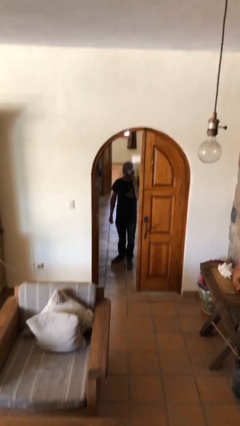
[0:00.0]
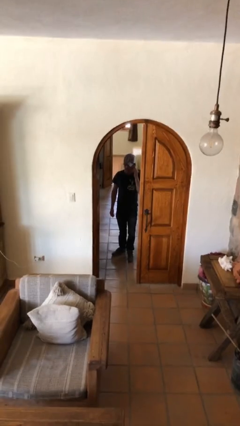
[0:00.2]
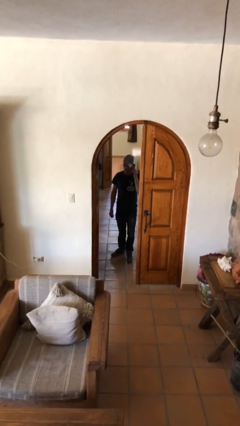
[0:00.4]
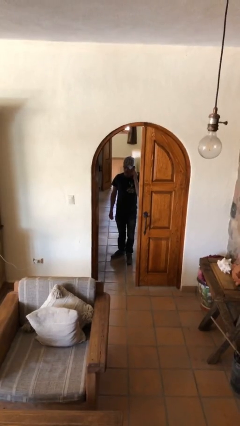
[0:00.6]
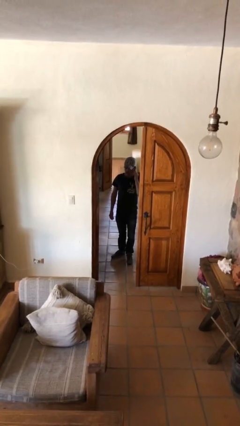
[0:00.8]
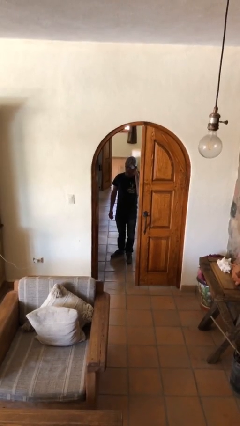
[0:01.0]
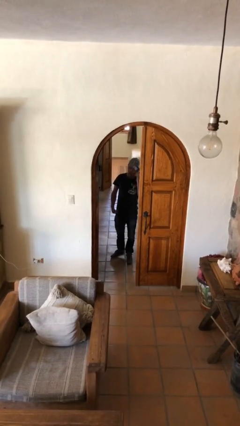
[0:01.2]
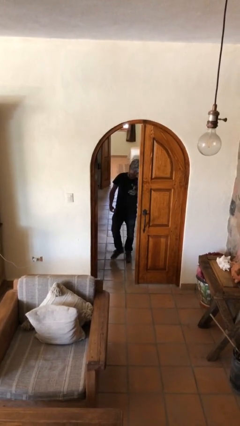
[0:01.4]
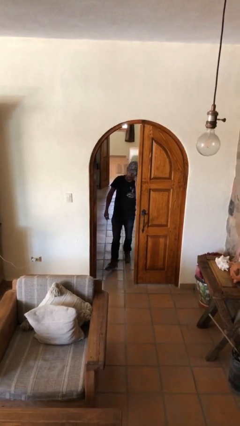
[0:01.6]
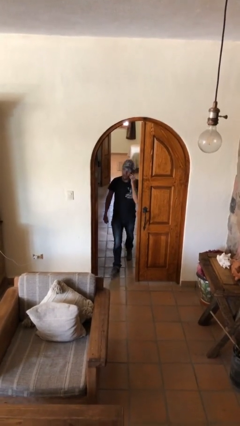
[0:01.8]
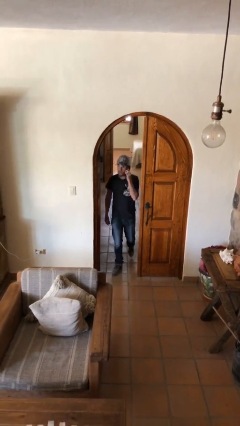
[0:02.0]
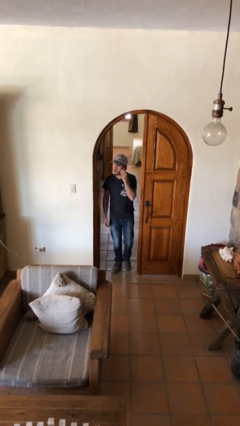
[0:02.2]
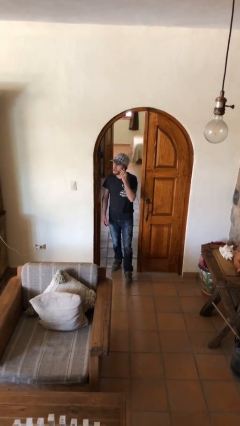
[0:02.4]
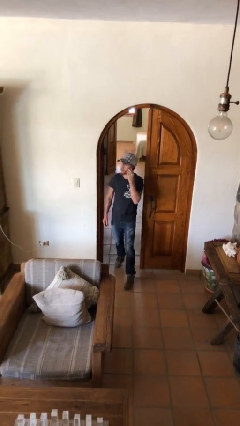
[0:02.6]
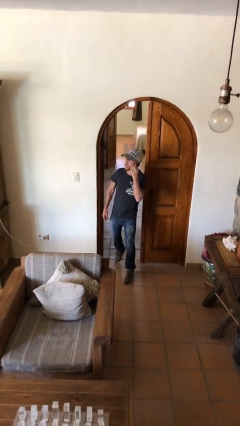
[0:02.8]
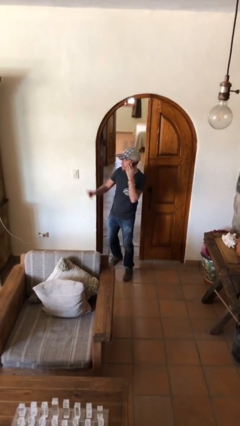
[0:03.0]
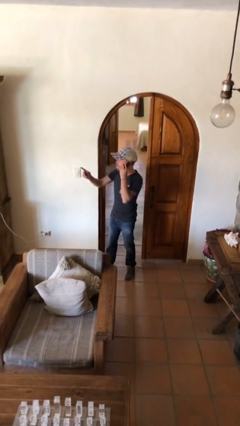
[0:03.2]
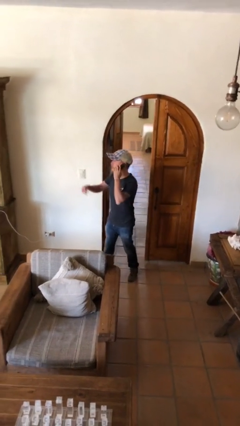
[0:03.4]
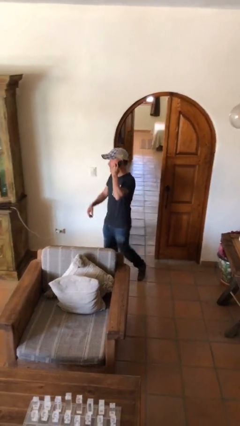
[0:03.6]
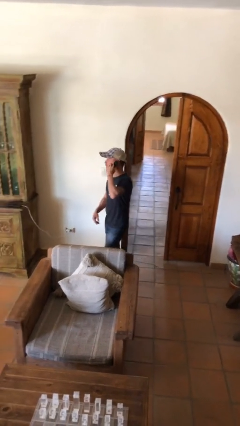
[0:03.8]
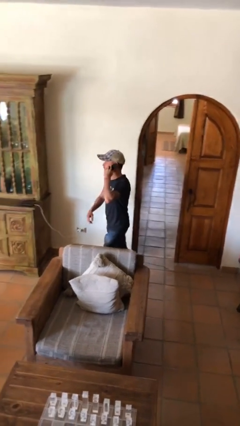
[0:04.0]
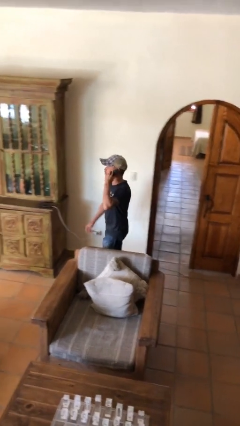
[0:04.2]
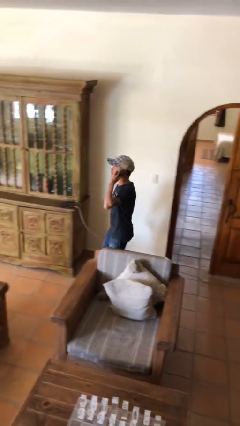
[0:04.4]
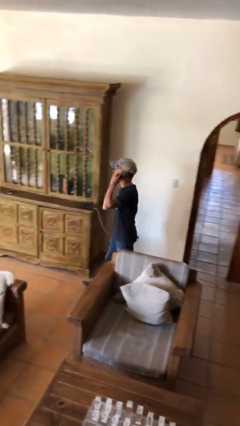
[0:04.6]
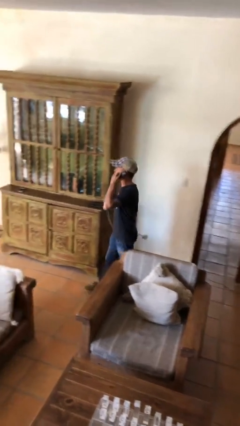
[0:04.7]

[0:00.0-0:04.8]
person enters scene through structure

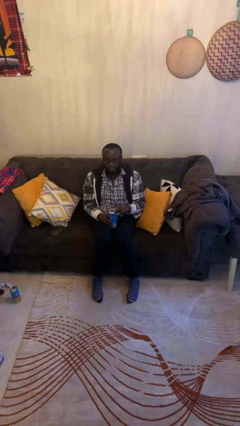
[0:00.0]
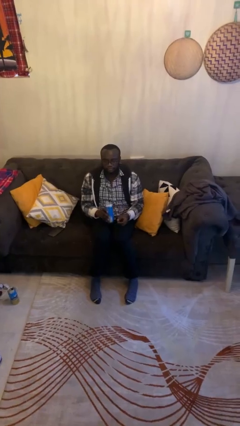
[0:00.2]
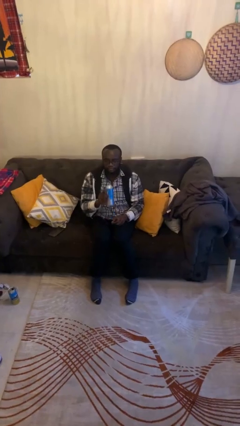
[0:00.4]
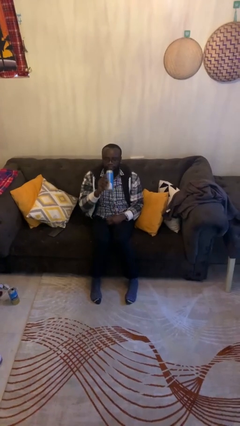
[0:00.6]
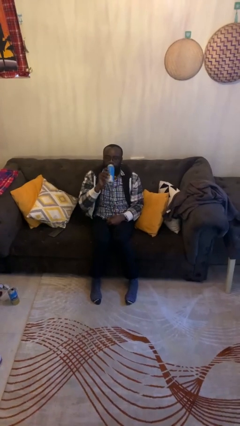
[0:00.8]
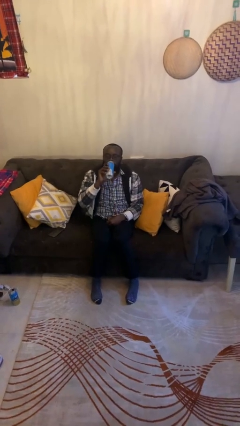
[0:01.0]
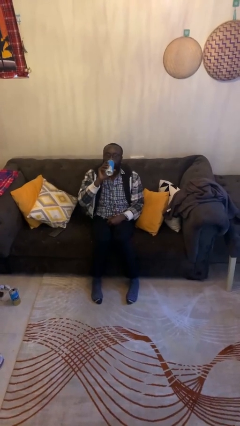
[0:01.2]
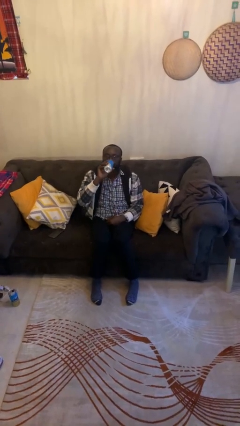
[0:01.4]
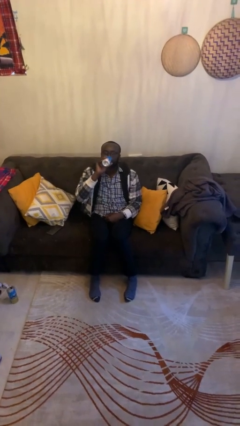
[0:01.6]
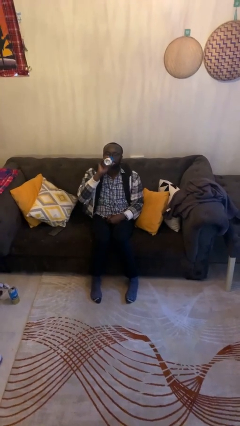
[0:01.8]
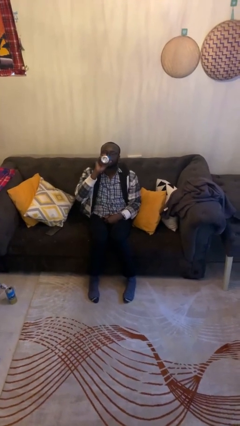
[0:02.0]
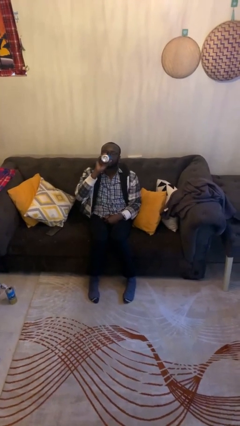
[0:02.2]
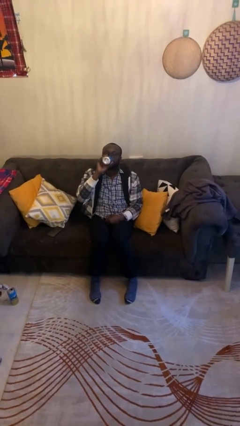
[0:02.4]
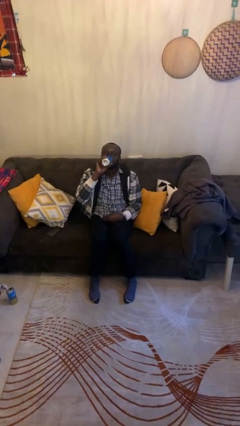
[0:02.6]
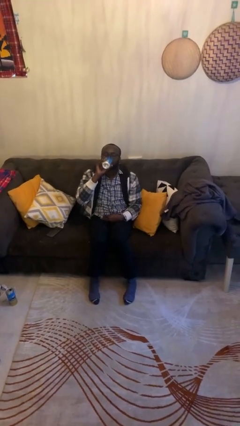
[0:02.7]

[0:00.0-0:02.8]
person drinks from beverage can

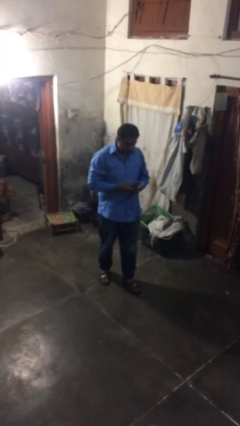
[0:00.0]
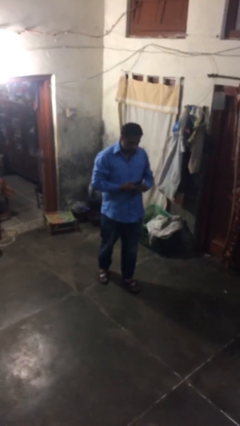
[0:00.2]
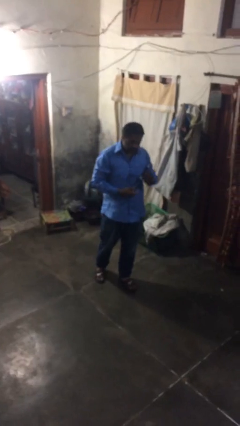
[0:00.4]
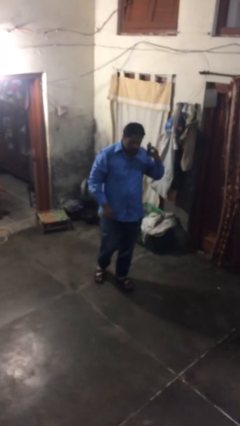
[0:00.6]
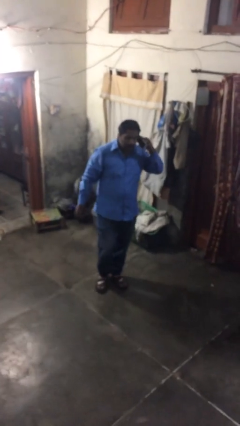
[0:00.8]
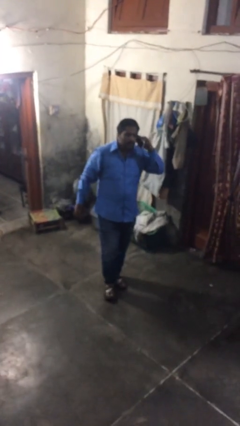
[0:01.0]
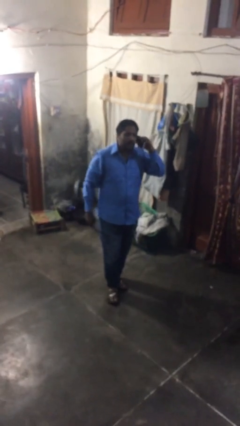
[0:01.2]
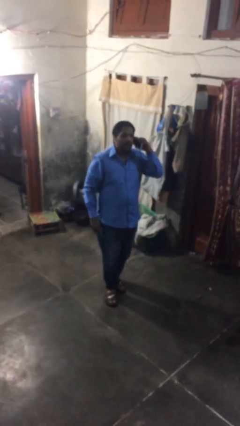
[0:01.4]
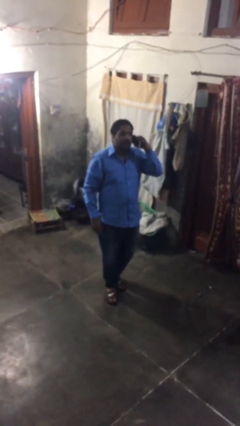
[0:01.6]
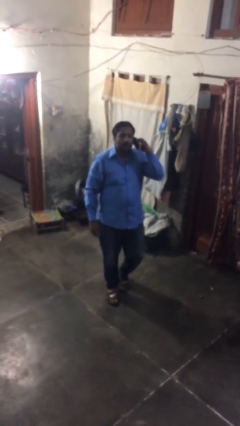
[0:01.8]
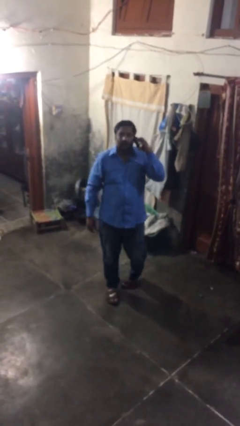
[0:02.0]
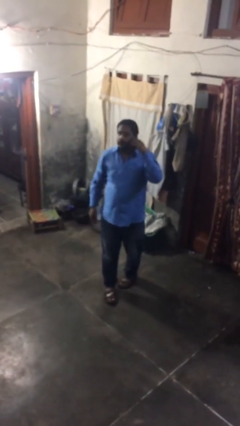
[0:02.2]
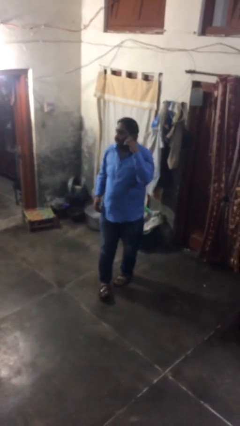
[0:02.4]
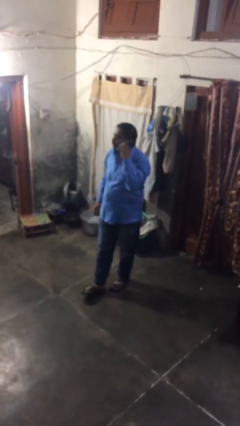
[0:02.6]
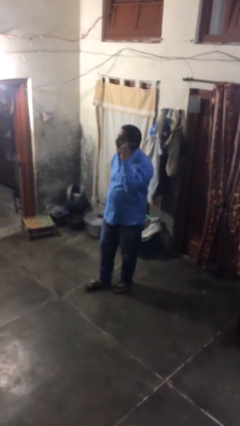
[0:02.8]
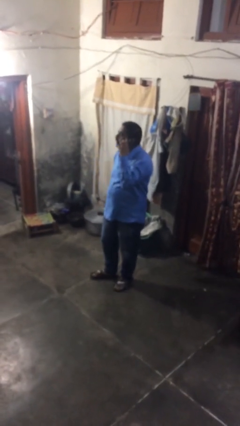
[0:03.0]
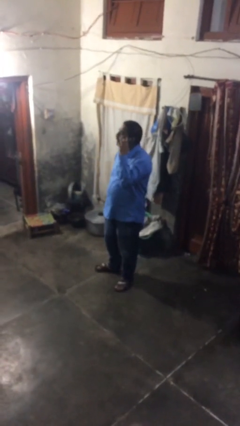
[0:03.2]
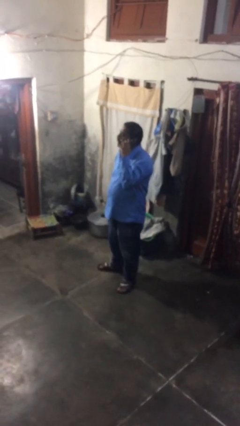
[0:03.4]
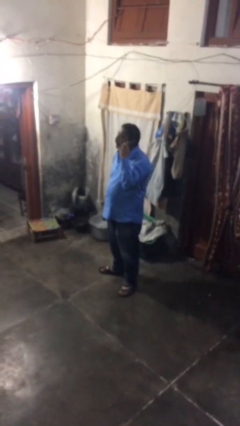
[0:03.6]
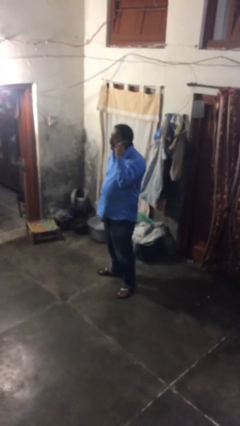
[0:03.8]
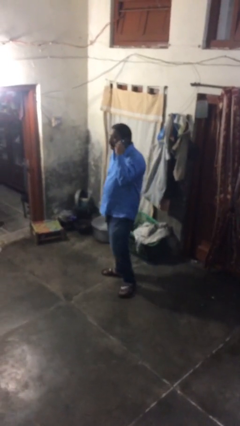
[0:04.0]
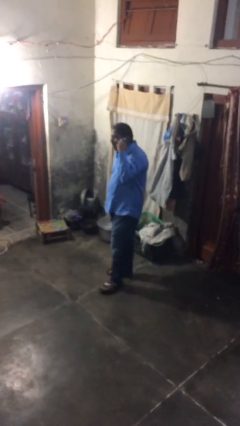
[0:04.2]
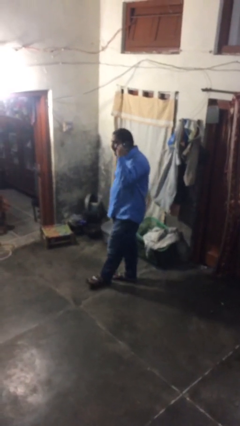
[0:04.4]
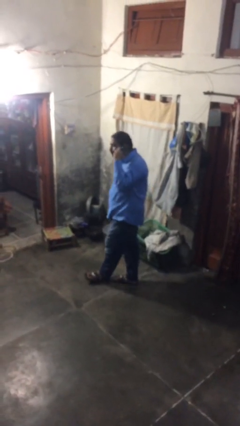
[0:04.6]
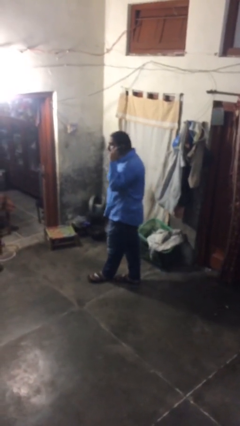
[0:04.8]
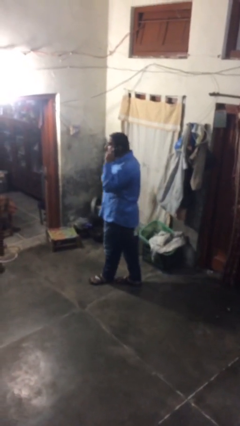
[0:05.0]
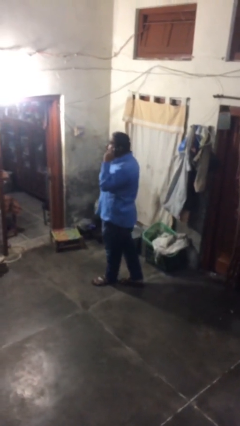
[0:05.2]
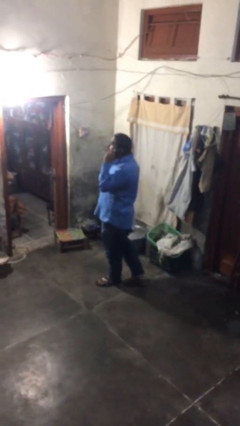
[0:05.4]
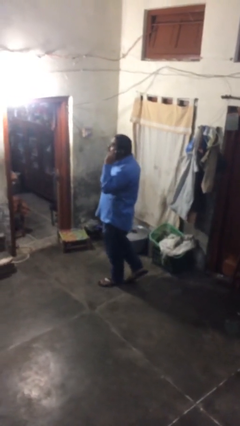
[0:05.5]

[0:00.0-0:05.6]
person talks on phone

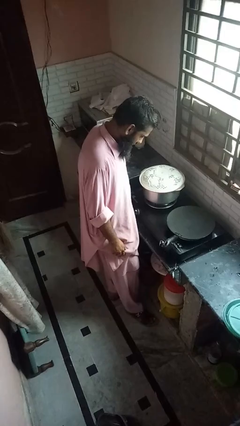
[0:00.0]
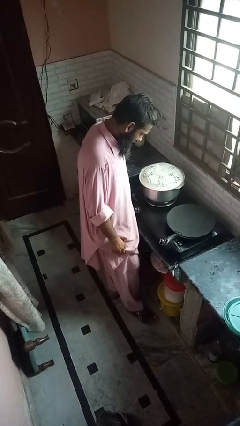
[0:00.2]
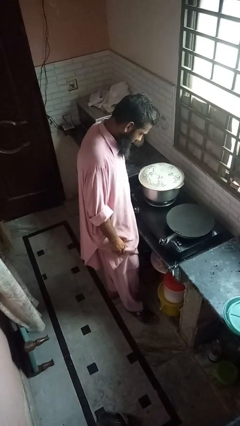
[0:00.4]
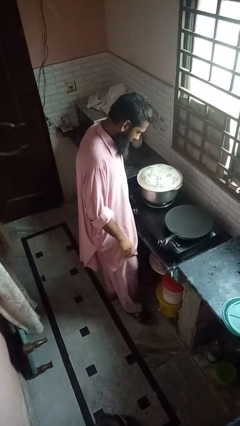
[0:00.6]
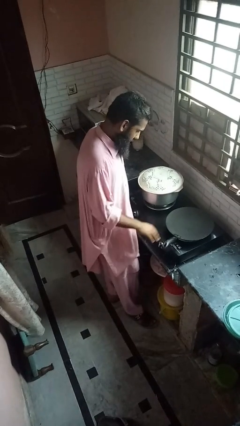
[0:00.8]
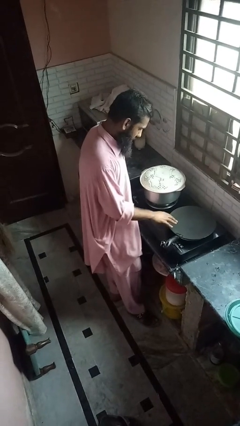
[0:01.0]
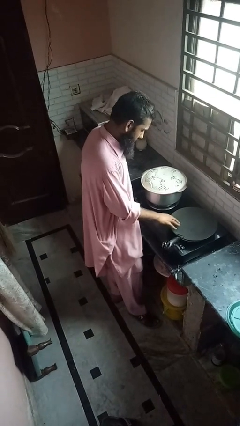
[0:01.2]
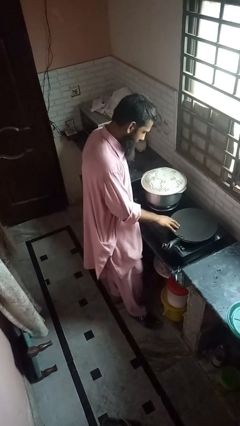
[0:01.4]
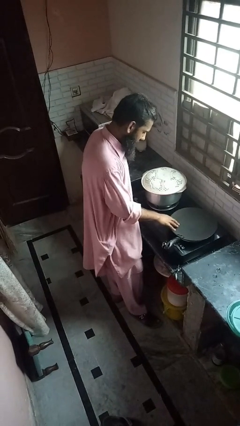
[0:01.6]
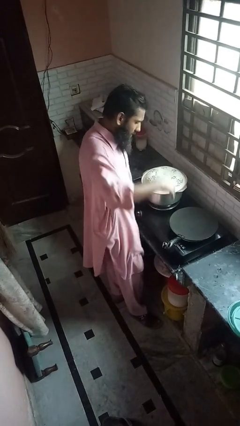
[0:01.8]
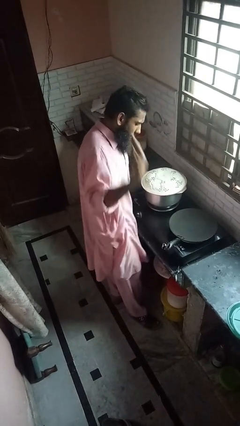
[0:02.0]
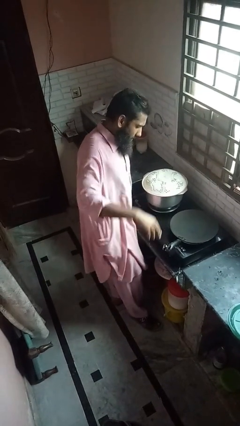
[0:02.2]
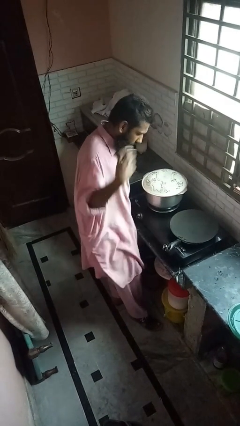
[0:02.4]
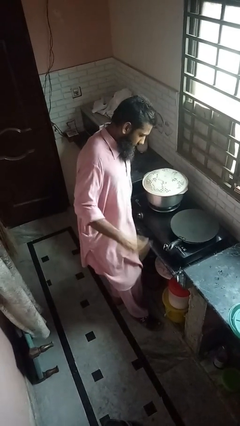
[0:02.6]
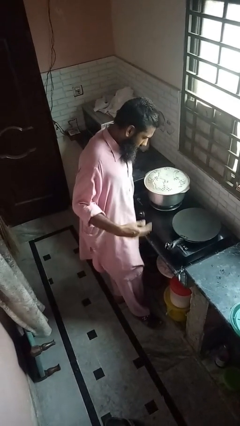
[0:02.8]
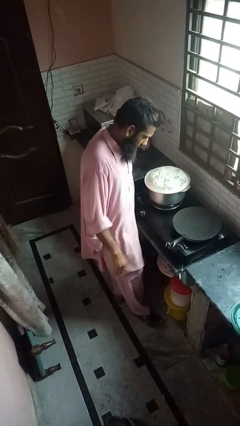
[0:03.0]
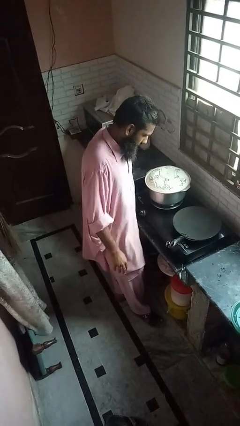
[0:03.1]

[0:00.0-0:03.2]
person burns hand

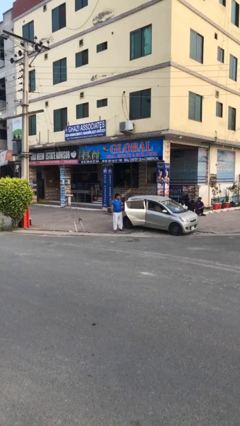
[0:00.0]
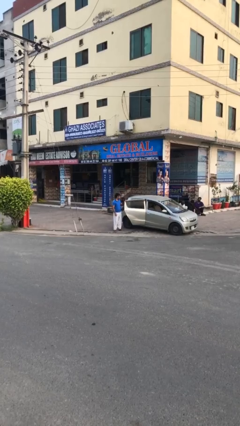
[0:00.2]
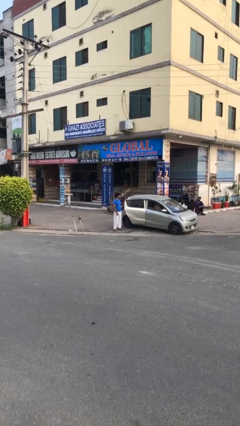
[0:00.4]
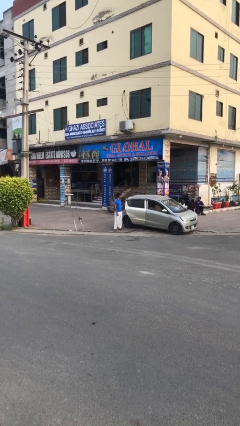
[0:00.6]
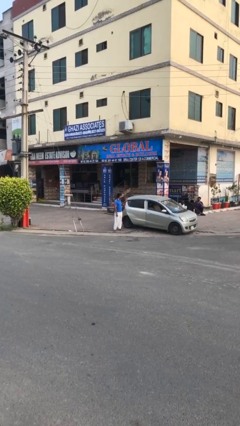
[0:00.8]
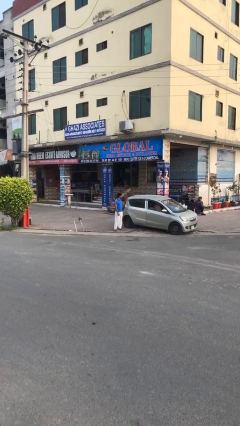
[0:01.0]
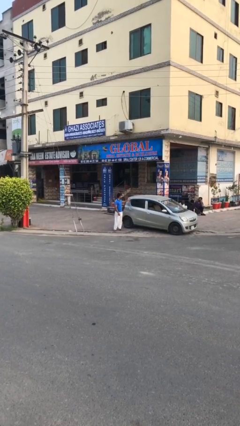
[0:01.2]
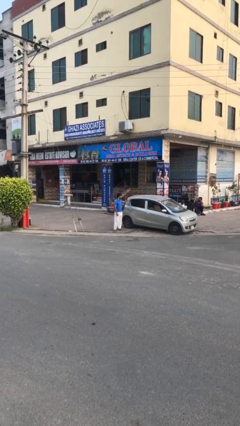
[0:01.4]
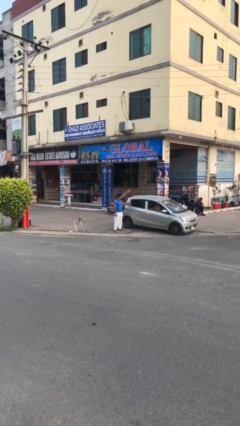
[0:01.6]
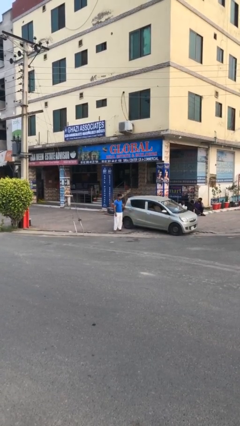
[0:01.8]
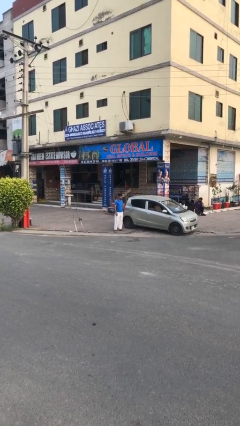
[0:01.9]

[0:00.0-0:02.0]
person closes car door
